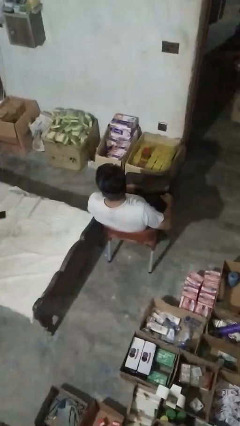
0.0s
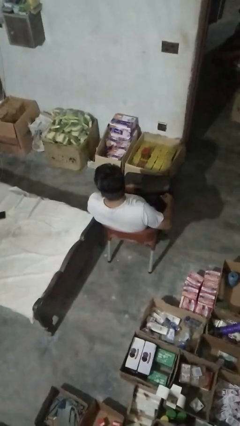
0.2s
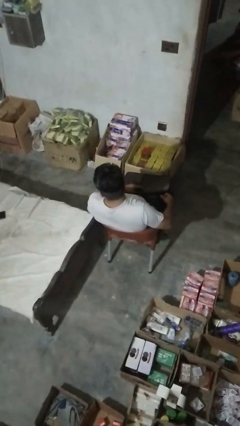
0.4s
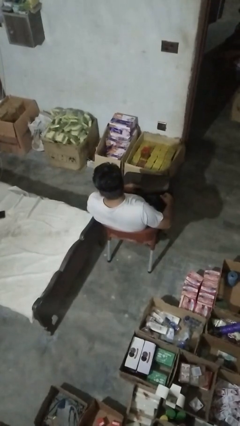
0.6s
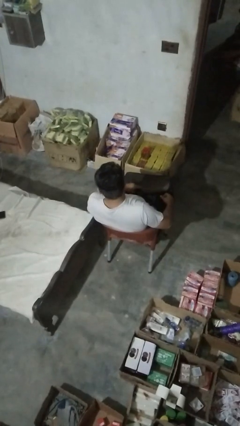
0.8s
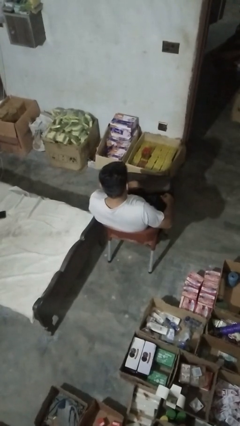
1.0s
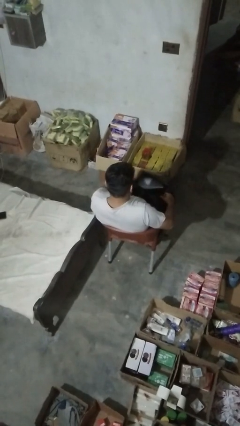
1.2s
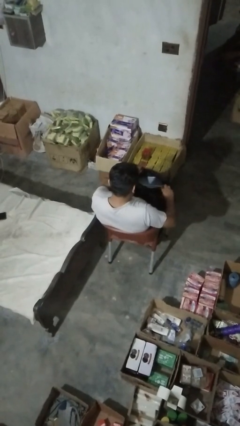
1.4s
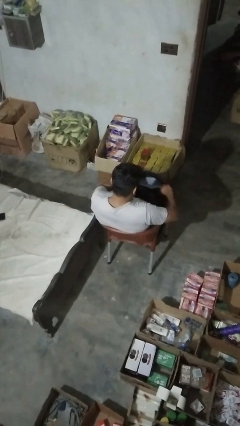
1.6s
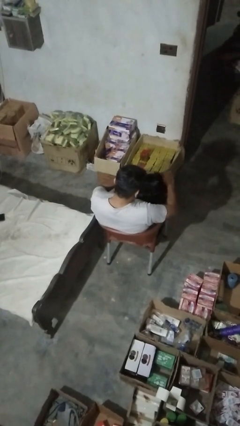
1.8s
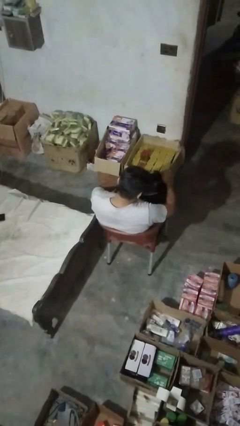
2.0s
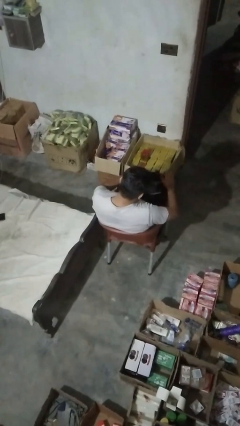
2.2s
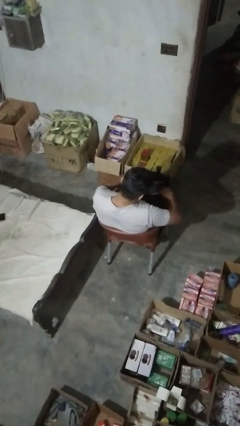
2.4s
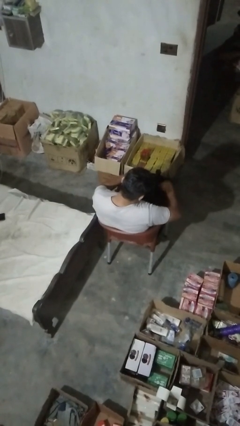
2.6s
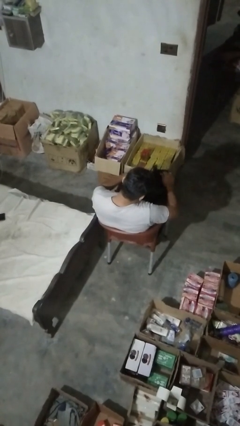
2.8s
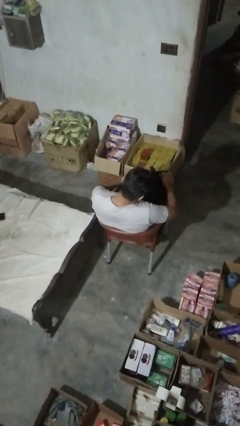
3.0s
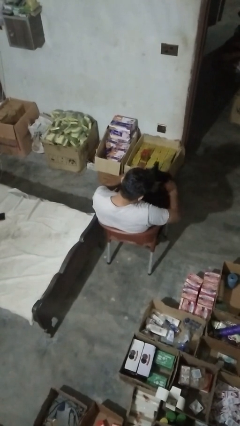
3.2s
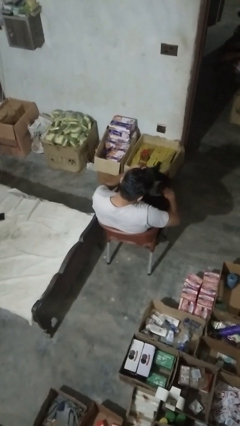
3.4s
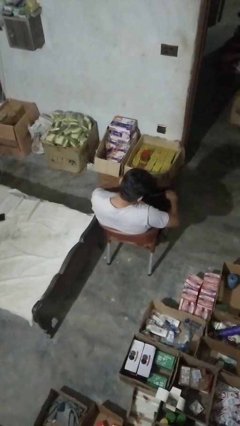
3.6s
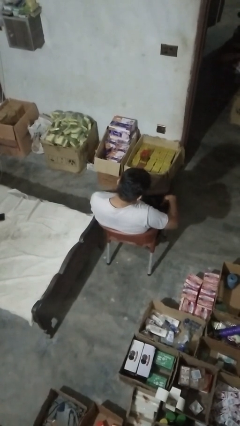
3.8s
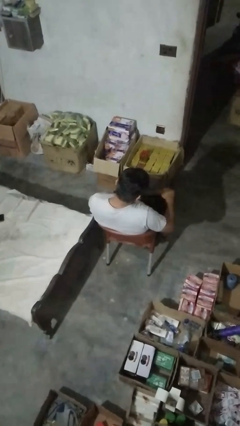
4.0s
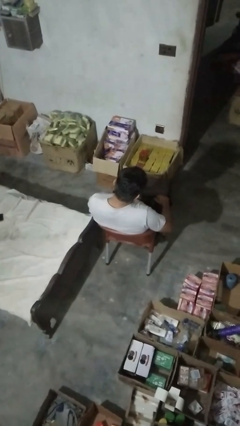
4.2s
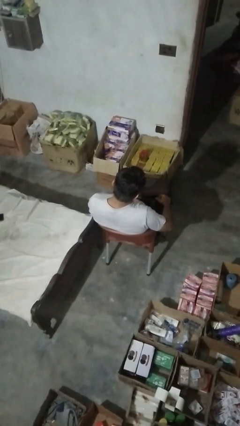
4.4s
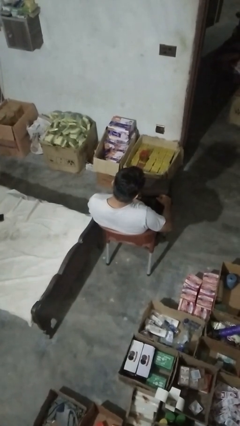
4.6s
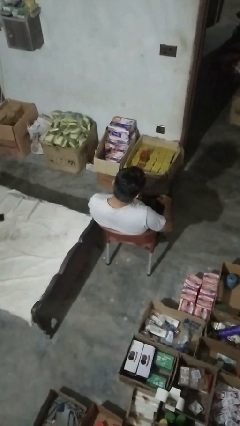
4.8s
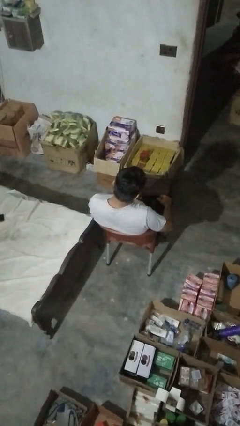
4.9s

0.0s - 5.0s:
person searches in bag

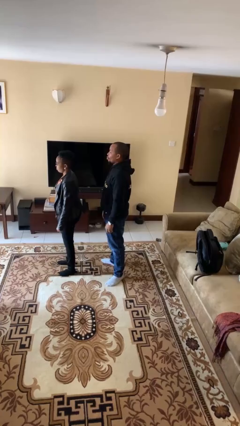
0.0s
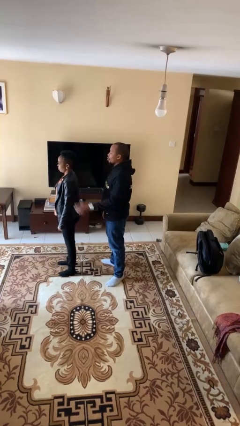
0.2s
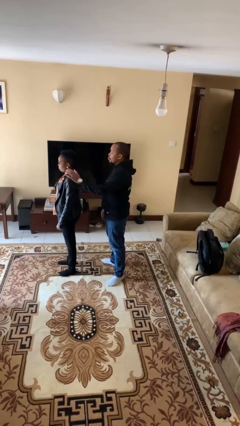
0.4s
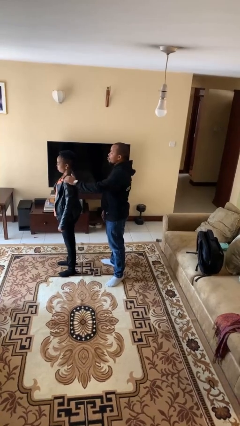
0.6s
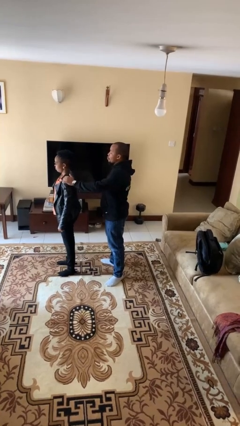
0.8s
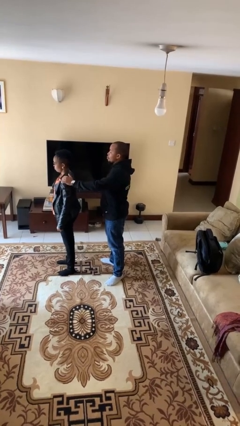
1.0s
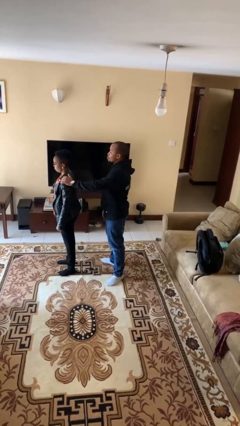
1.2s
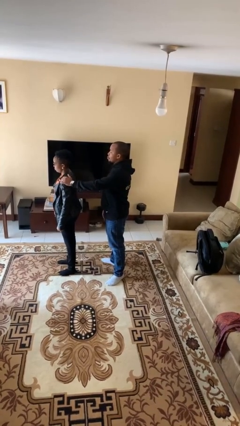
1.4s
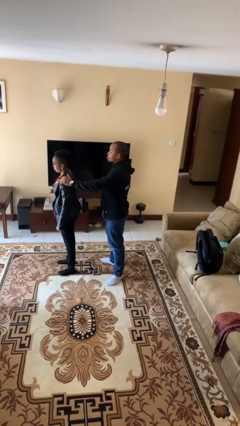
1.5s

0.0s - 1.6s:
person grabs person by shoulder

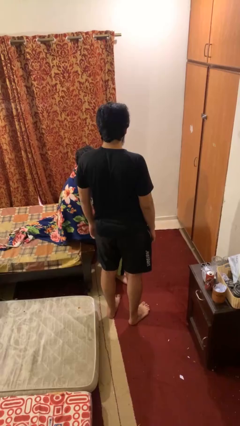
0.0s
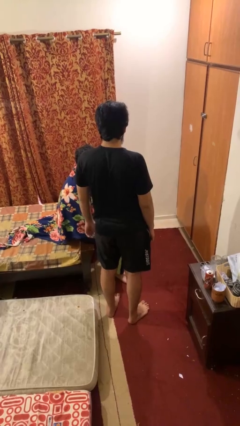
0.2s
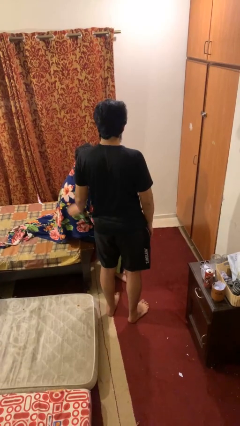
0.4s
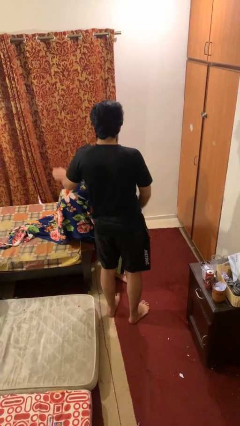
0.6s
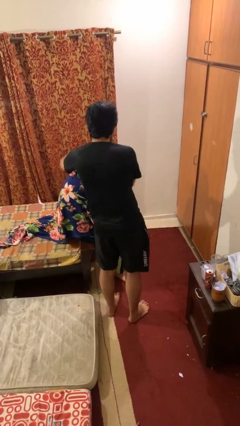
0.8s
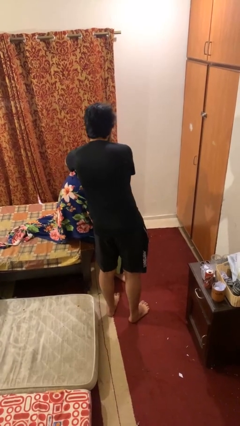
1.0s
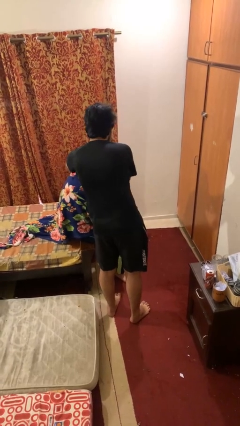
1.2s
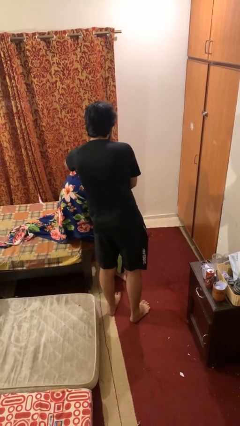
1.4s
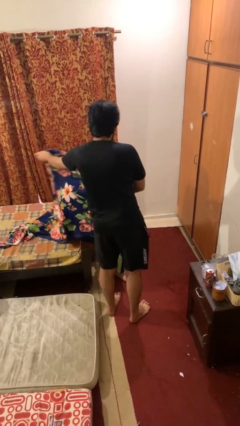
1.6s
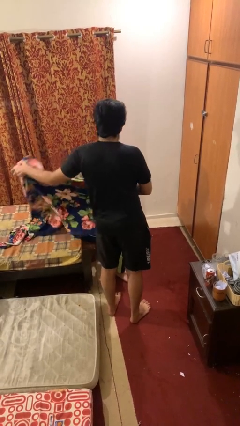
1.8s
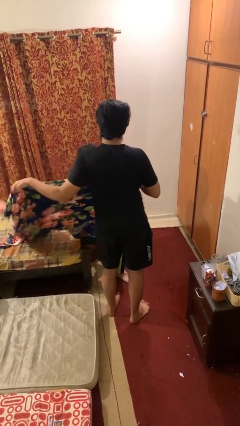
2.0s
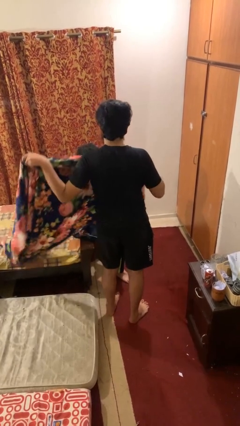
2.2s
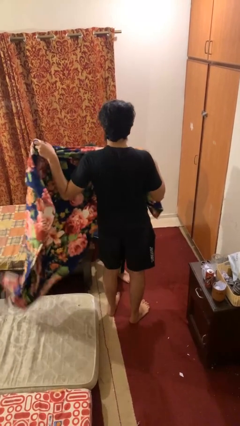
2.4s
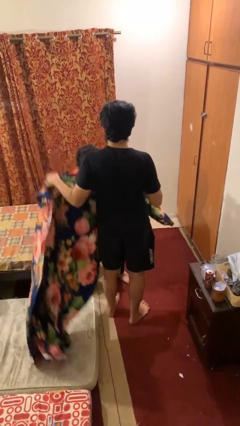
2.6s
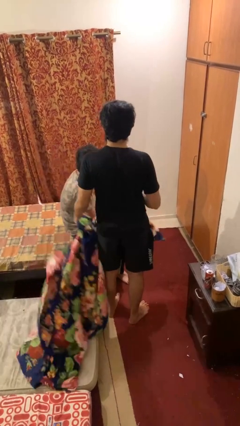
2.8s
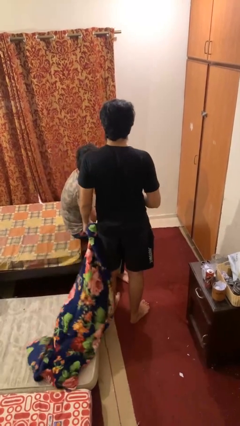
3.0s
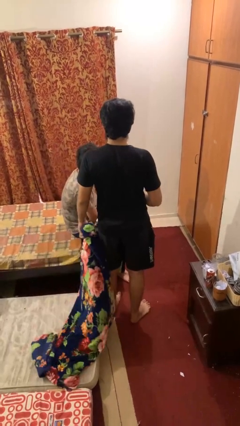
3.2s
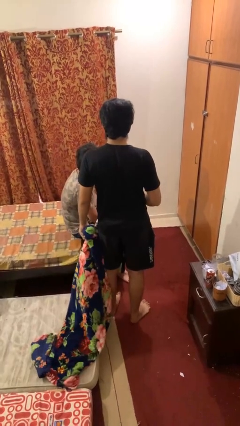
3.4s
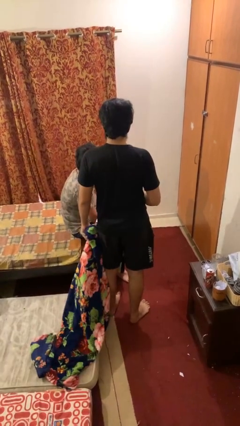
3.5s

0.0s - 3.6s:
person uncovers friend with blanket

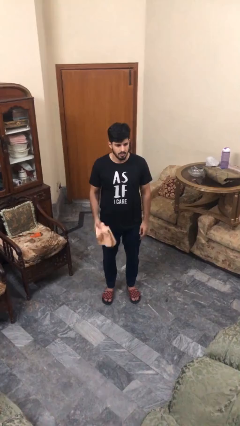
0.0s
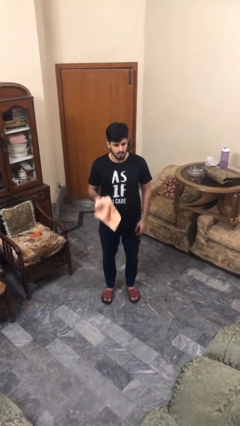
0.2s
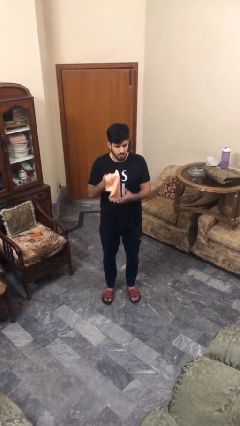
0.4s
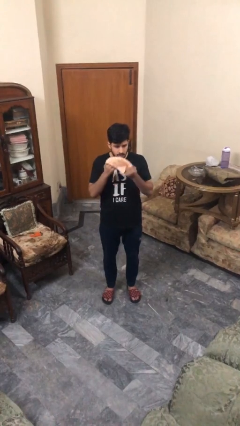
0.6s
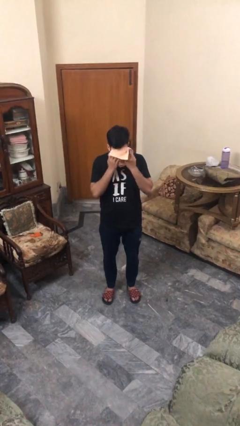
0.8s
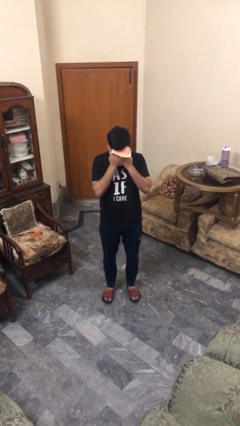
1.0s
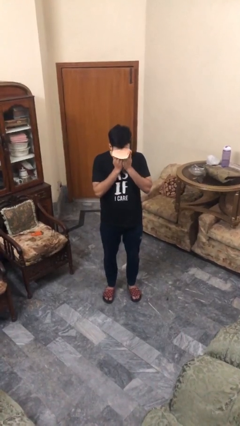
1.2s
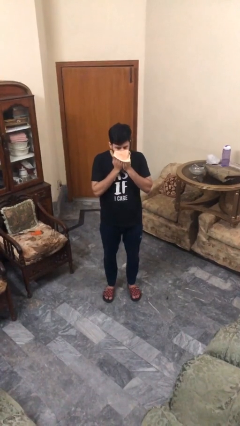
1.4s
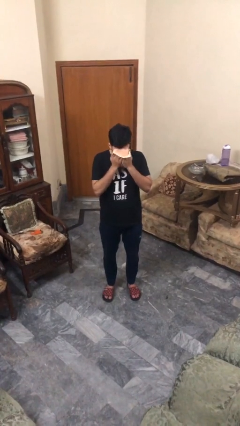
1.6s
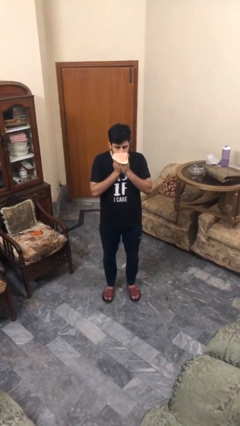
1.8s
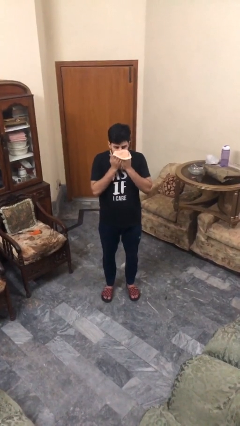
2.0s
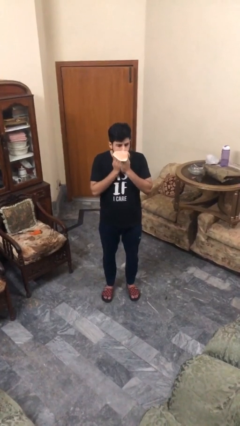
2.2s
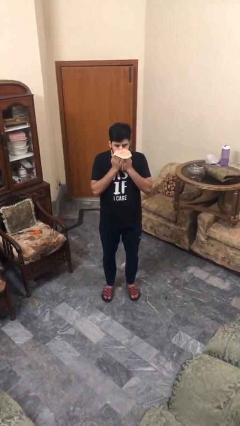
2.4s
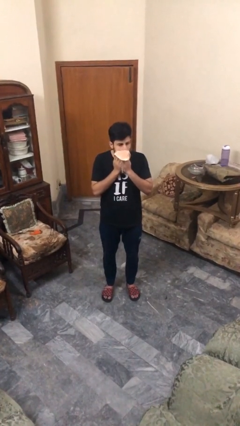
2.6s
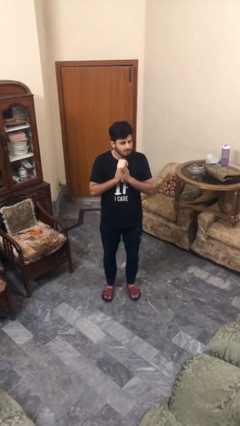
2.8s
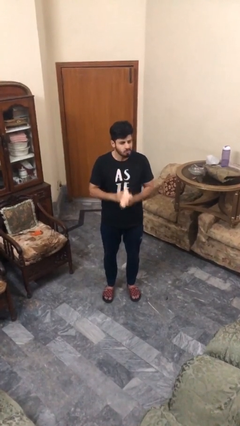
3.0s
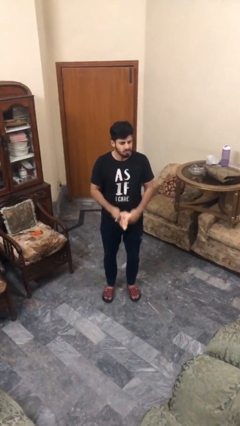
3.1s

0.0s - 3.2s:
person wipes mouth with napkin

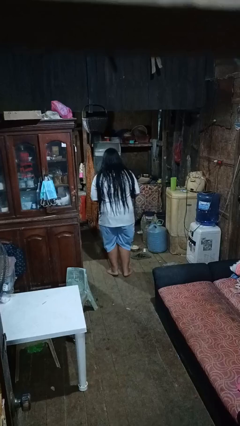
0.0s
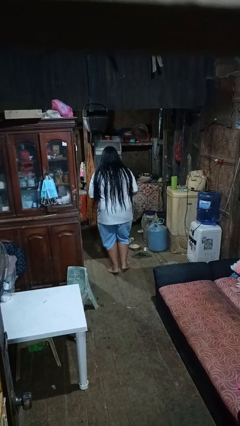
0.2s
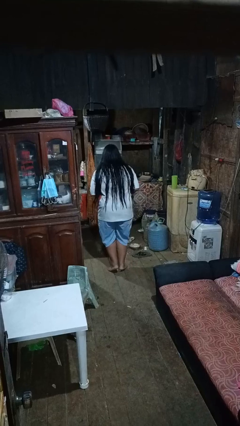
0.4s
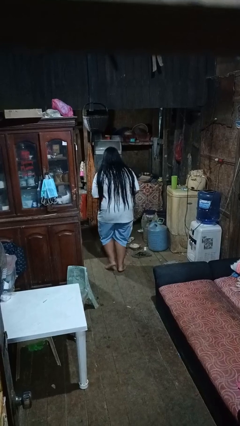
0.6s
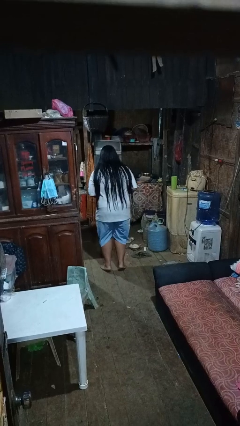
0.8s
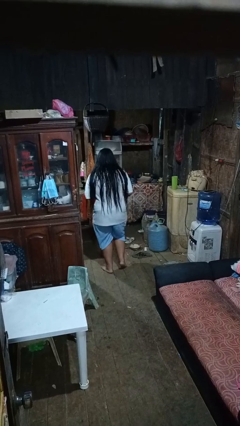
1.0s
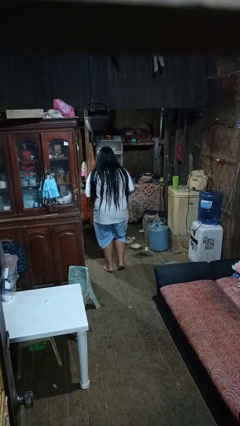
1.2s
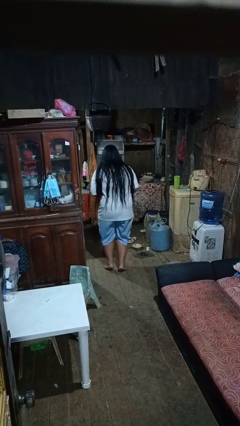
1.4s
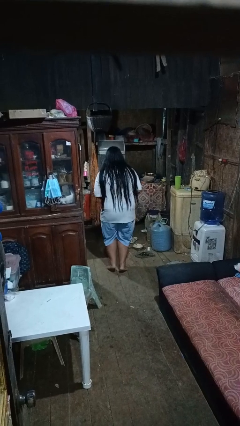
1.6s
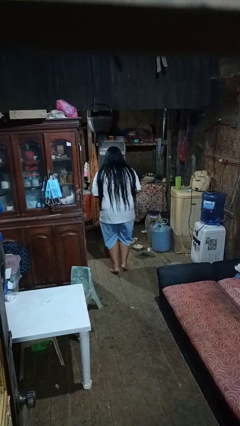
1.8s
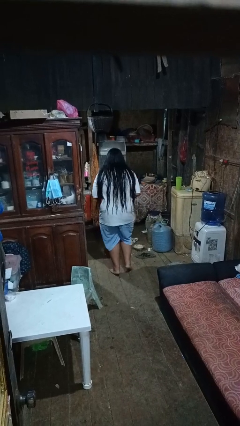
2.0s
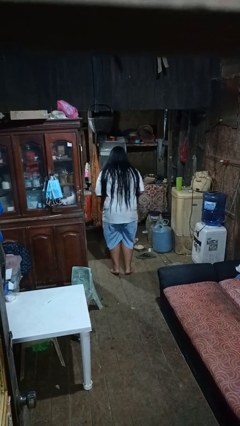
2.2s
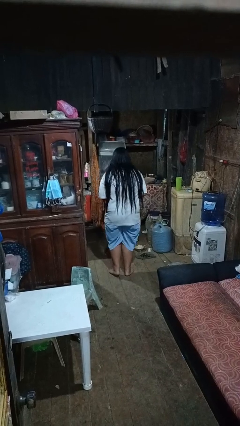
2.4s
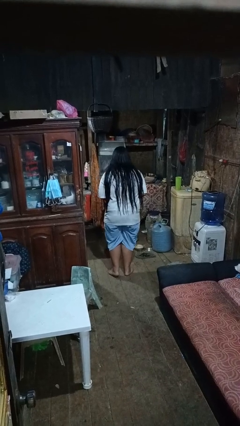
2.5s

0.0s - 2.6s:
person walks tiptoe

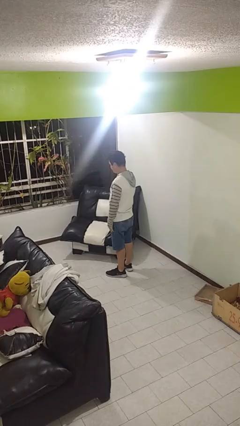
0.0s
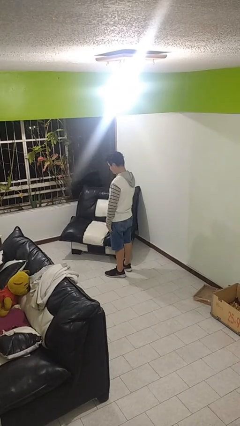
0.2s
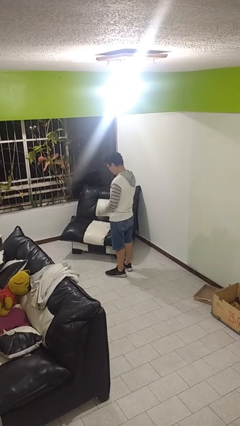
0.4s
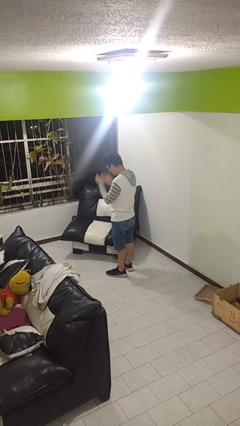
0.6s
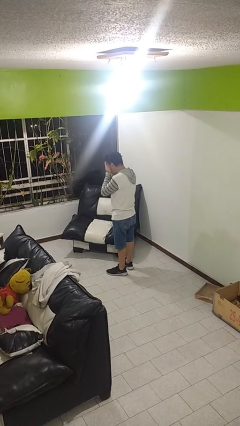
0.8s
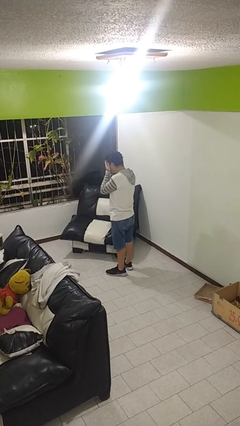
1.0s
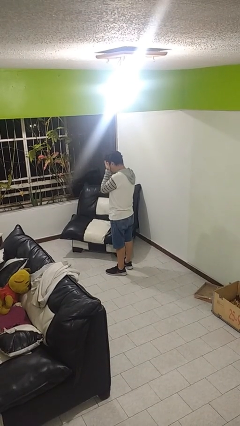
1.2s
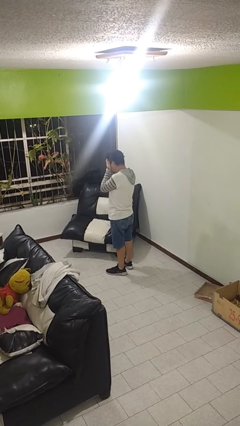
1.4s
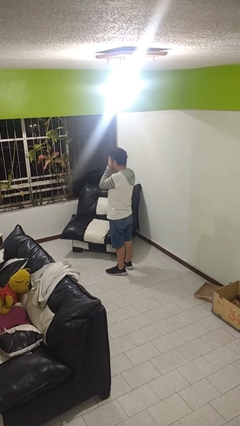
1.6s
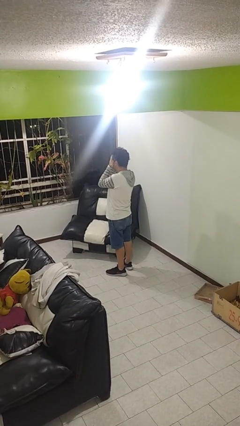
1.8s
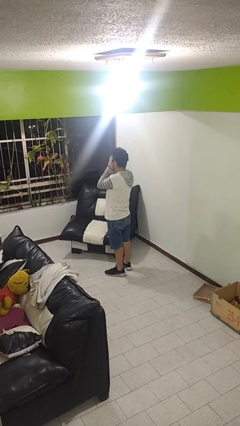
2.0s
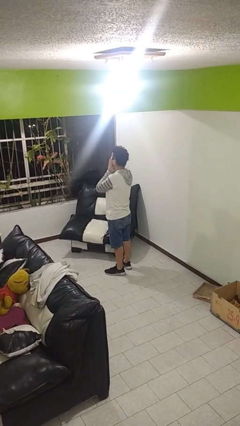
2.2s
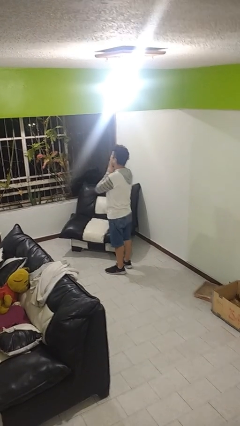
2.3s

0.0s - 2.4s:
person covers face with hands
